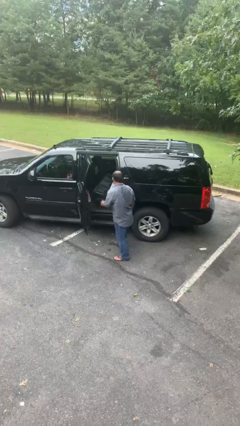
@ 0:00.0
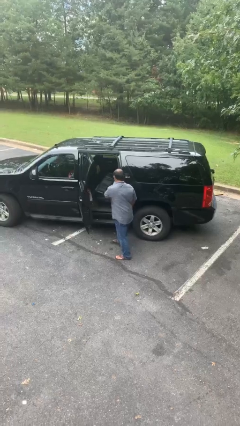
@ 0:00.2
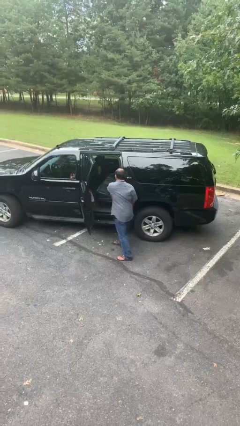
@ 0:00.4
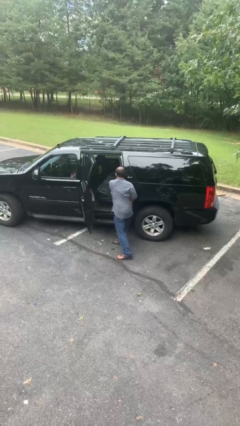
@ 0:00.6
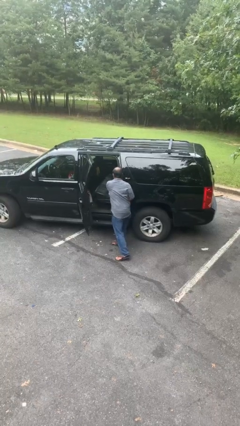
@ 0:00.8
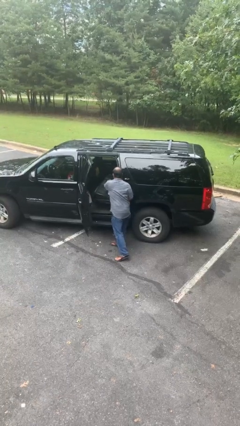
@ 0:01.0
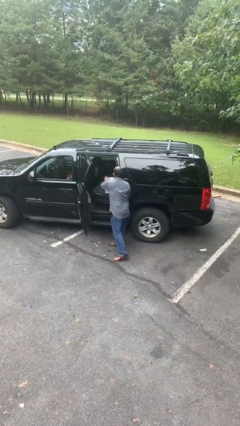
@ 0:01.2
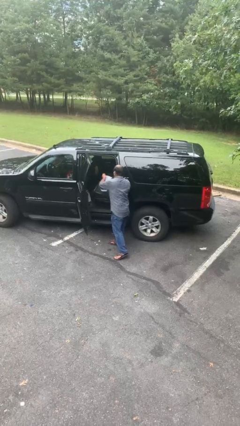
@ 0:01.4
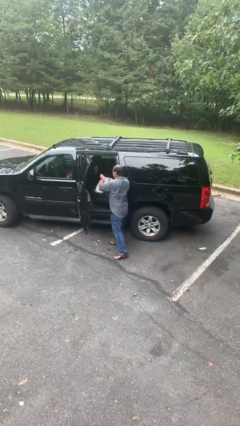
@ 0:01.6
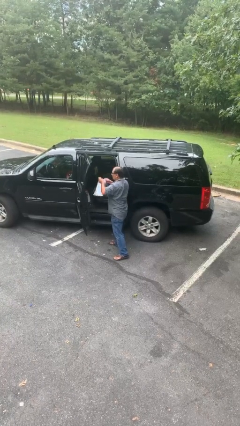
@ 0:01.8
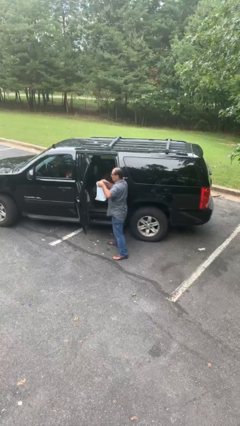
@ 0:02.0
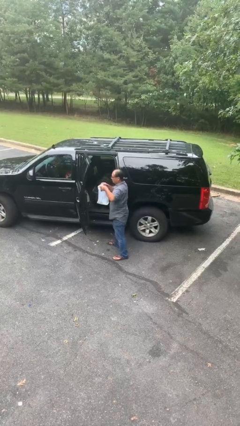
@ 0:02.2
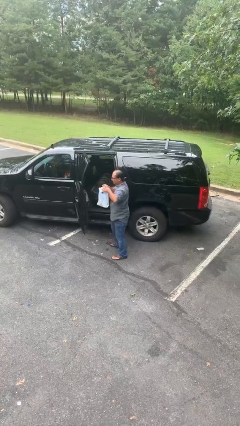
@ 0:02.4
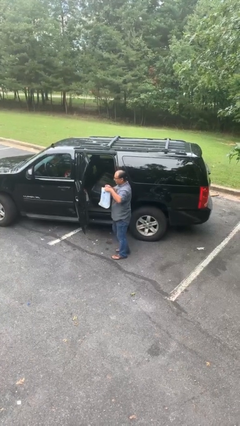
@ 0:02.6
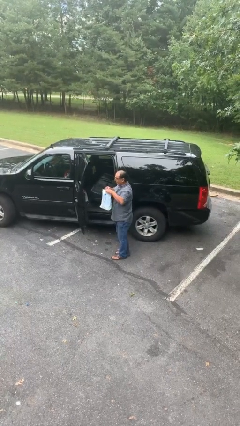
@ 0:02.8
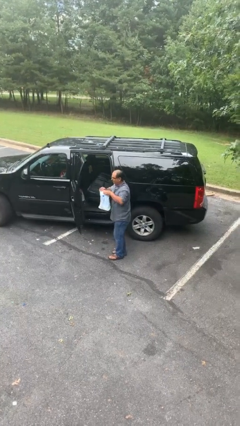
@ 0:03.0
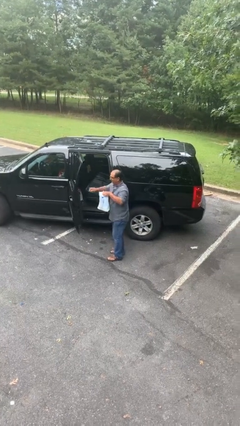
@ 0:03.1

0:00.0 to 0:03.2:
person unloads car

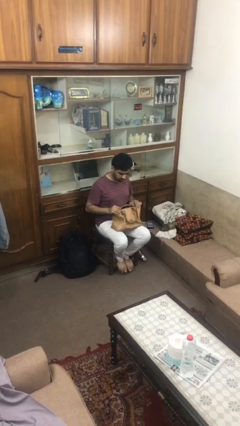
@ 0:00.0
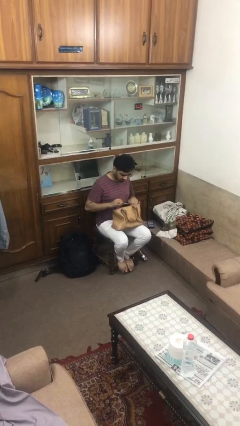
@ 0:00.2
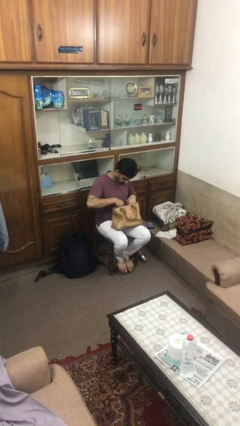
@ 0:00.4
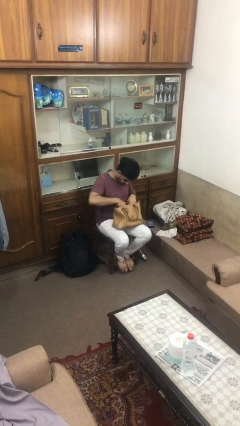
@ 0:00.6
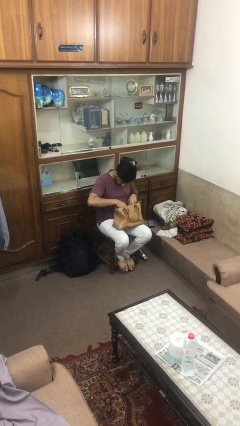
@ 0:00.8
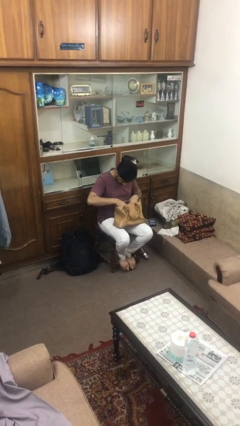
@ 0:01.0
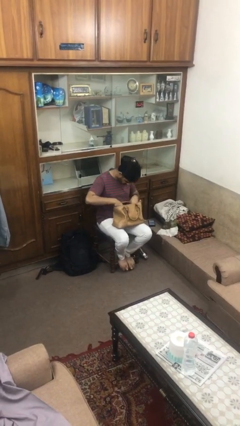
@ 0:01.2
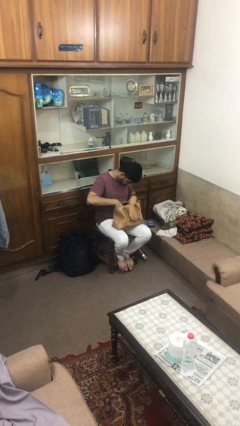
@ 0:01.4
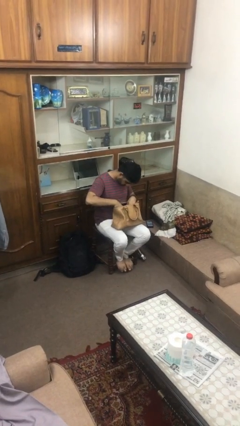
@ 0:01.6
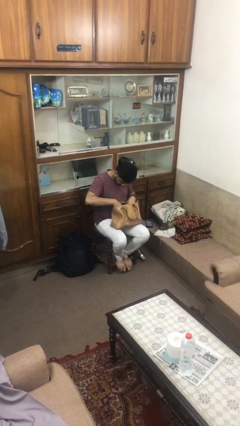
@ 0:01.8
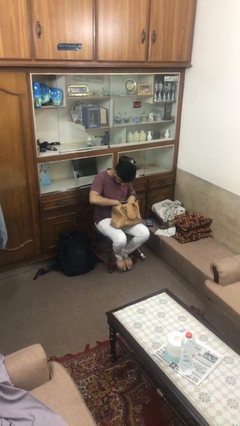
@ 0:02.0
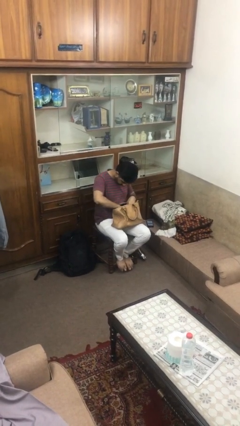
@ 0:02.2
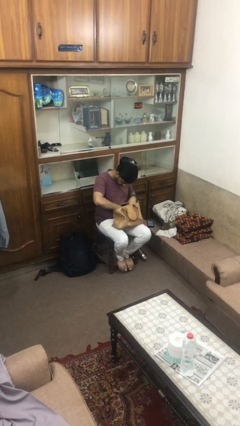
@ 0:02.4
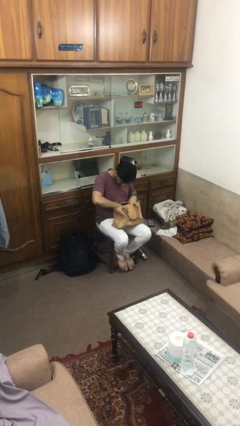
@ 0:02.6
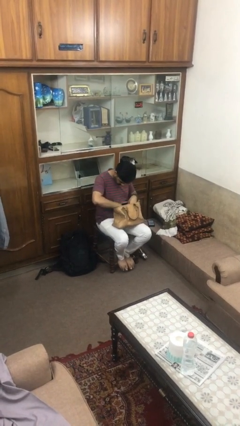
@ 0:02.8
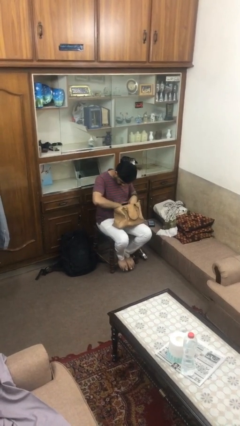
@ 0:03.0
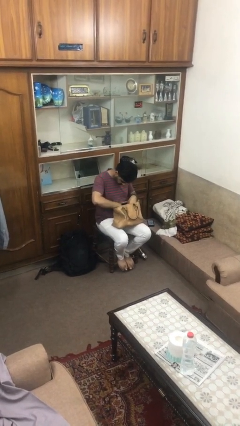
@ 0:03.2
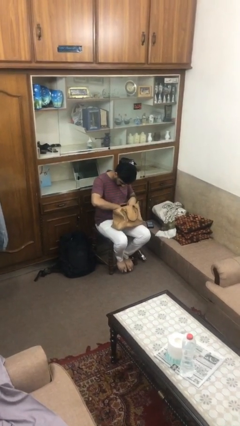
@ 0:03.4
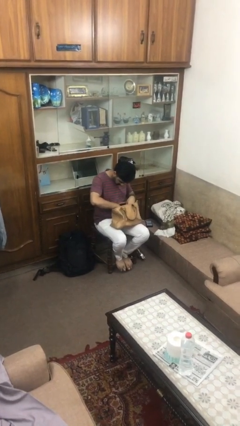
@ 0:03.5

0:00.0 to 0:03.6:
person searches in purse

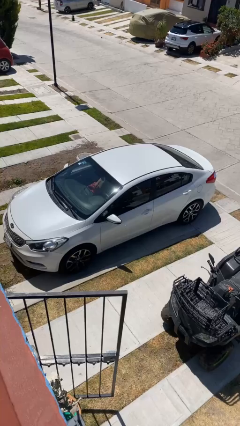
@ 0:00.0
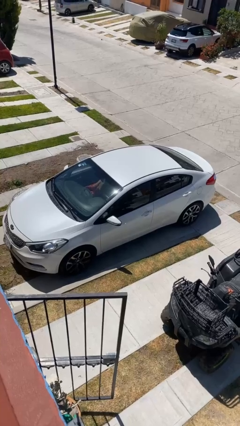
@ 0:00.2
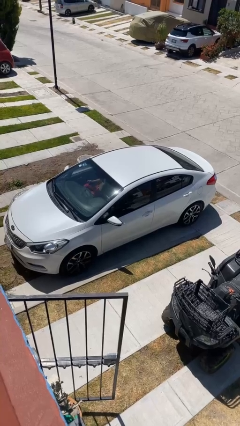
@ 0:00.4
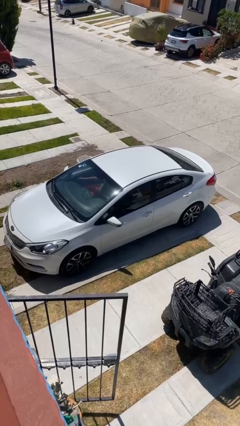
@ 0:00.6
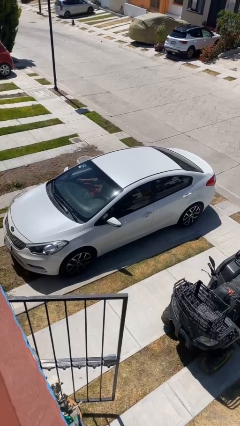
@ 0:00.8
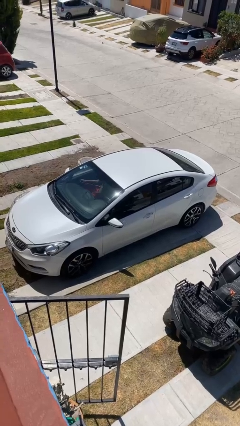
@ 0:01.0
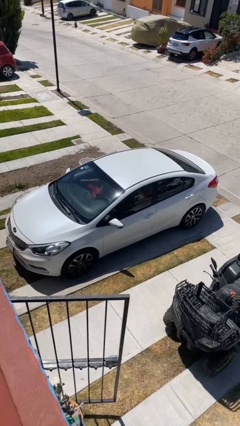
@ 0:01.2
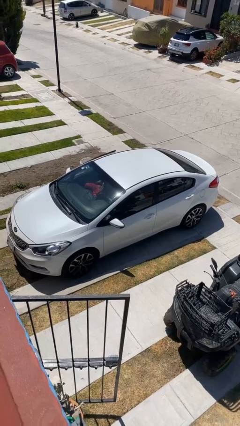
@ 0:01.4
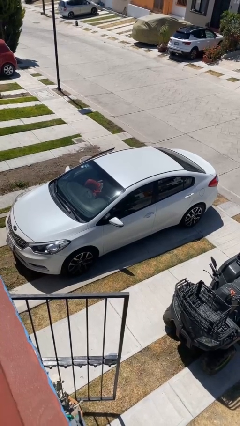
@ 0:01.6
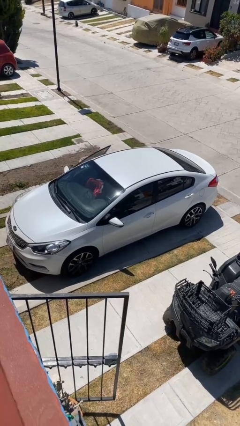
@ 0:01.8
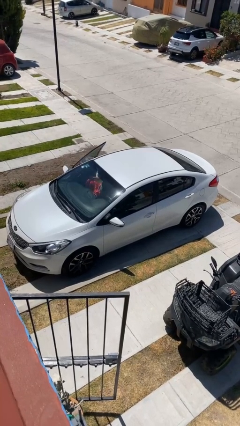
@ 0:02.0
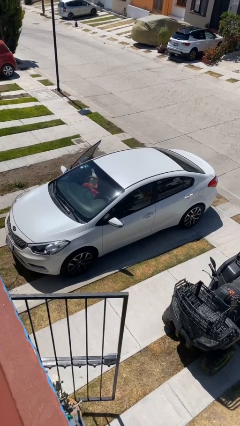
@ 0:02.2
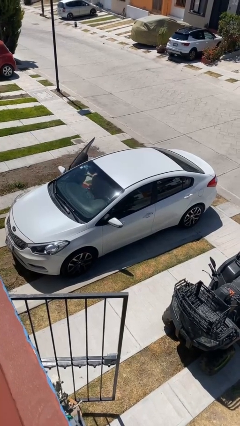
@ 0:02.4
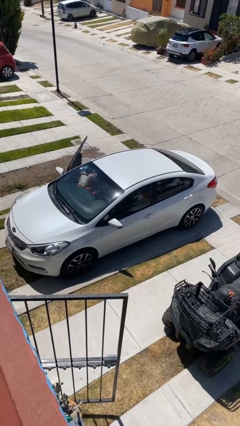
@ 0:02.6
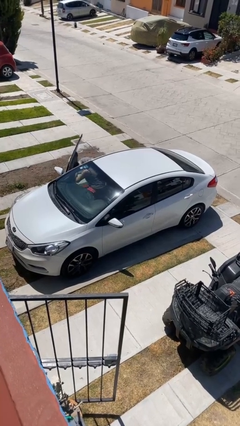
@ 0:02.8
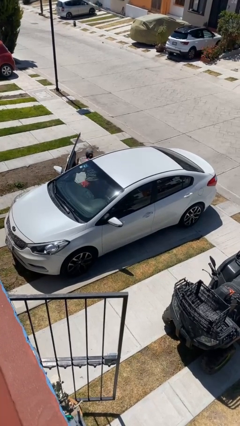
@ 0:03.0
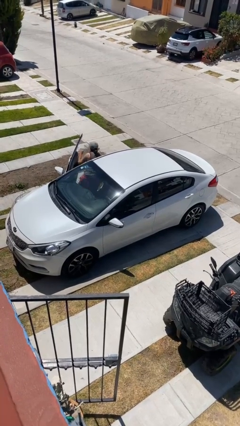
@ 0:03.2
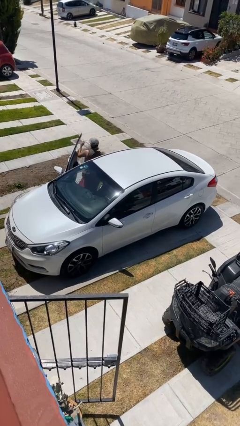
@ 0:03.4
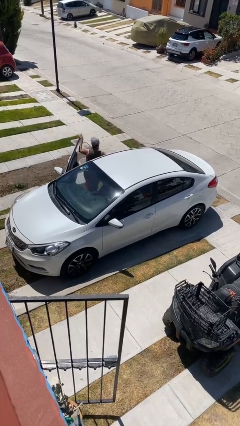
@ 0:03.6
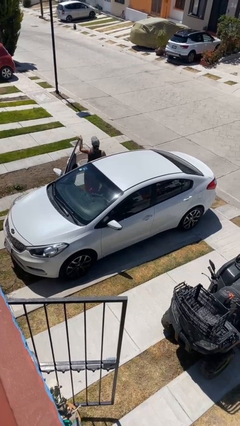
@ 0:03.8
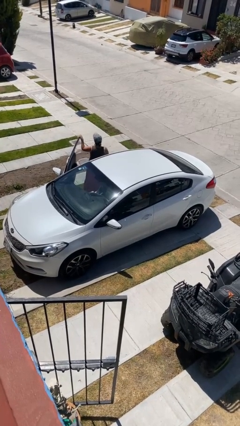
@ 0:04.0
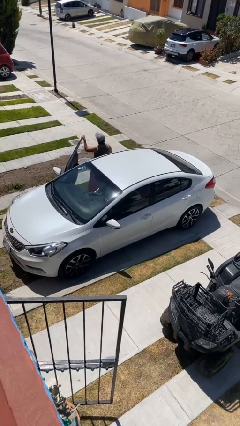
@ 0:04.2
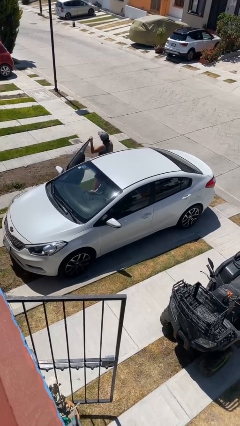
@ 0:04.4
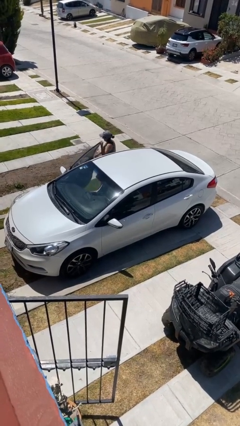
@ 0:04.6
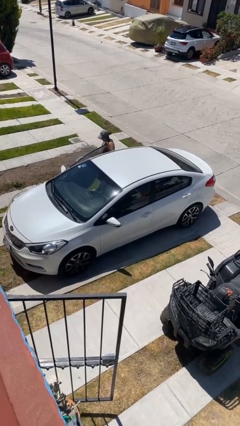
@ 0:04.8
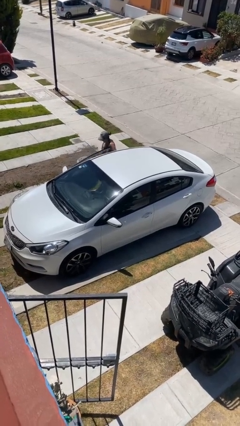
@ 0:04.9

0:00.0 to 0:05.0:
car drops off person

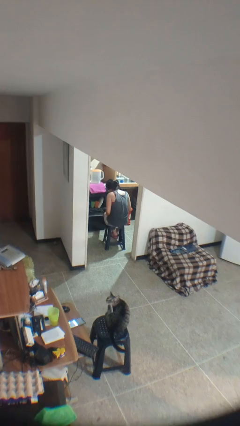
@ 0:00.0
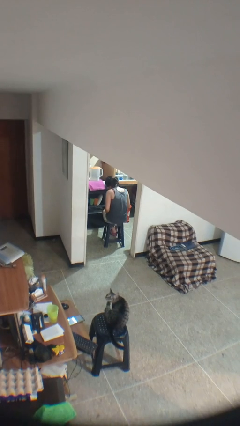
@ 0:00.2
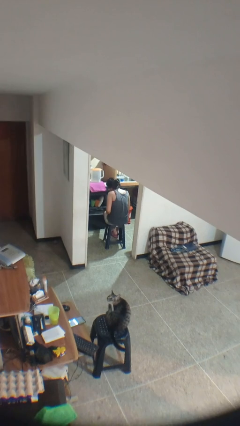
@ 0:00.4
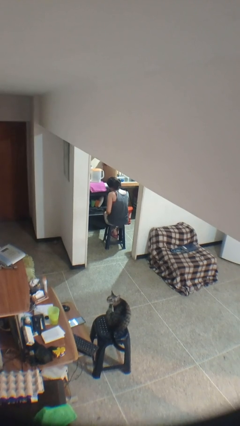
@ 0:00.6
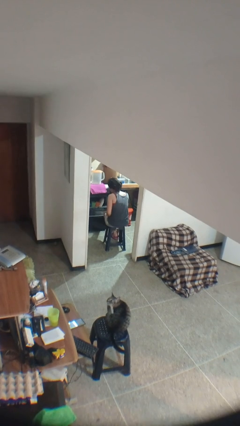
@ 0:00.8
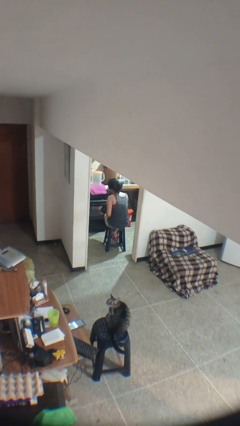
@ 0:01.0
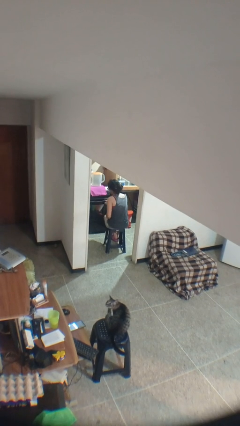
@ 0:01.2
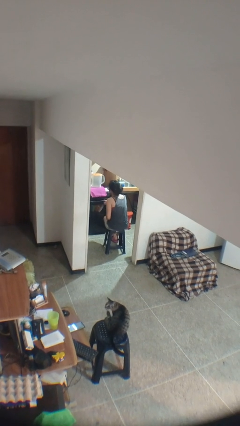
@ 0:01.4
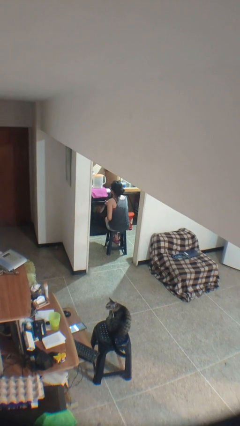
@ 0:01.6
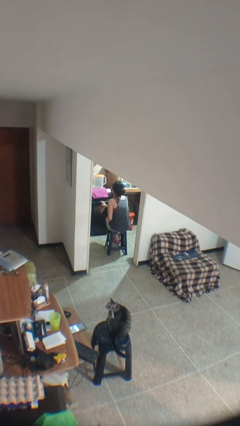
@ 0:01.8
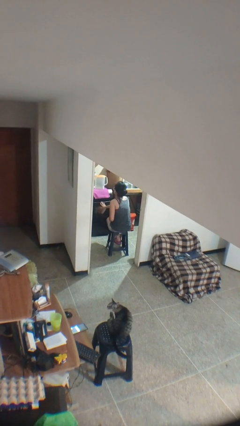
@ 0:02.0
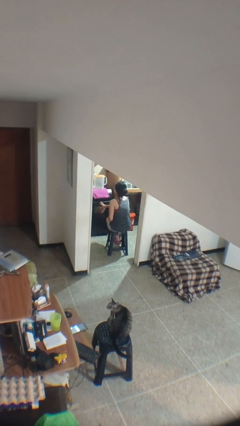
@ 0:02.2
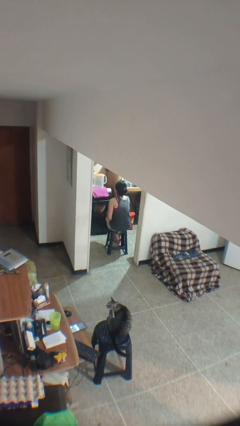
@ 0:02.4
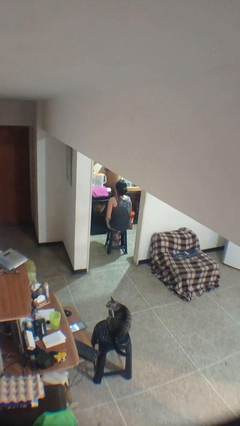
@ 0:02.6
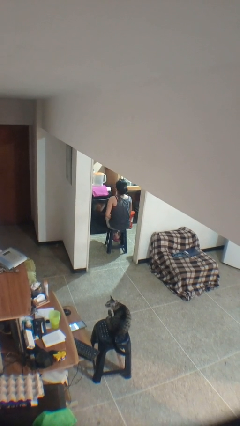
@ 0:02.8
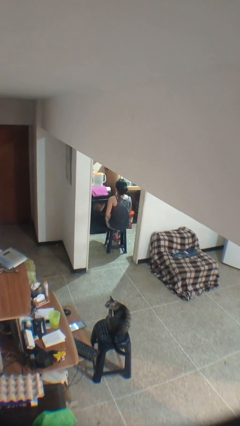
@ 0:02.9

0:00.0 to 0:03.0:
person closes dishwasher

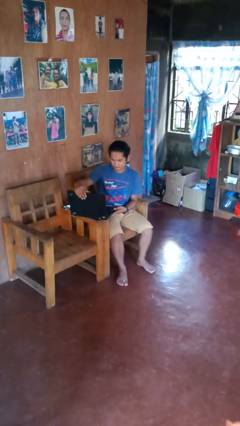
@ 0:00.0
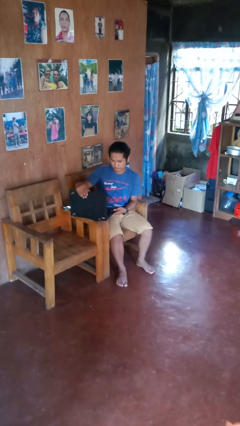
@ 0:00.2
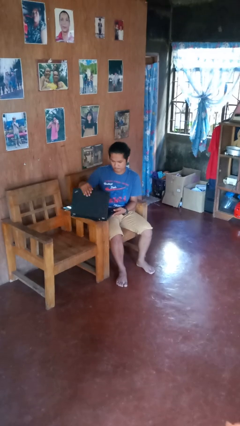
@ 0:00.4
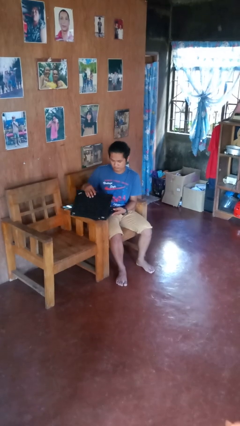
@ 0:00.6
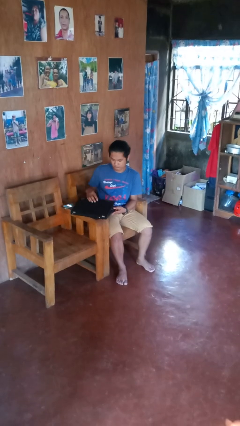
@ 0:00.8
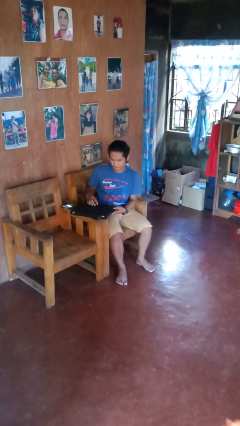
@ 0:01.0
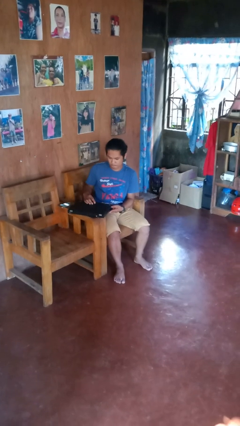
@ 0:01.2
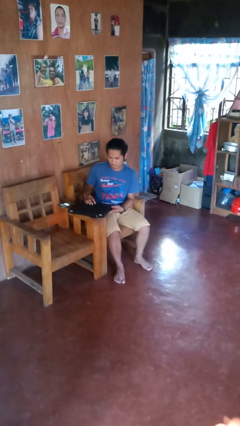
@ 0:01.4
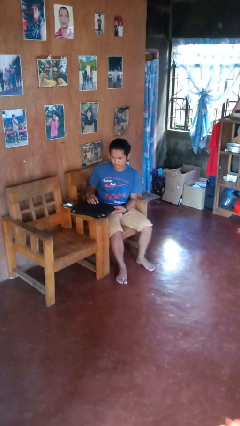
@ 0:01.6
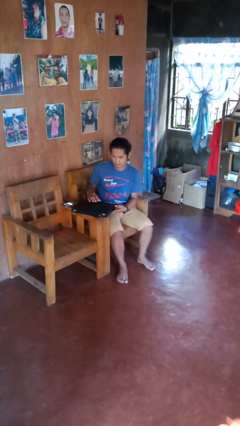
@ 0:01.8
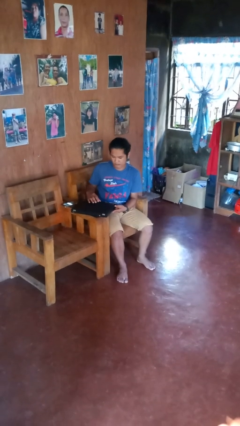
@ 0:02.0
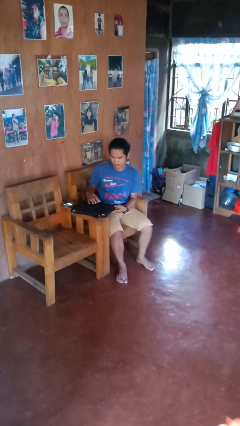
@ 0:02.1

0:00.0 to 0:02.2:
person closes laptop

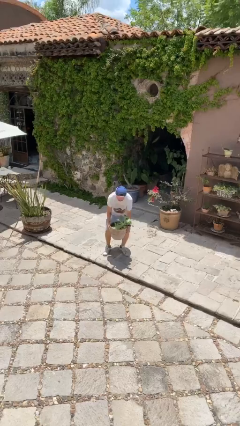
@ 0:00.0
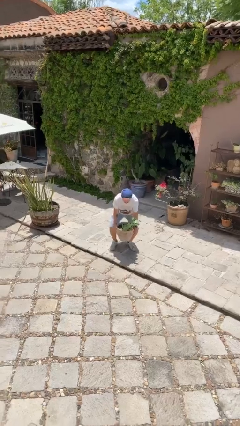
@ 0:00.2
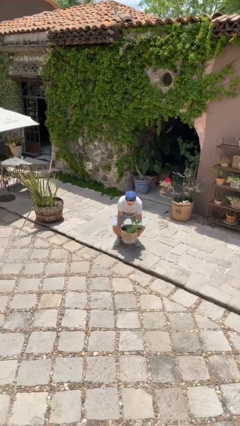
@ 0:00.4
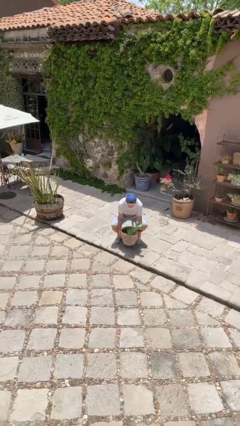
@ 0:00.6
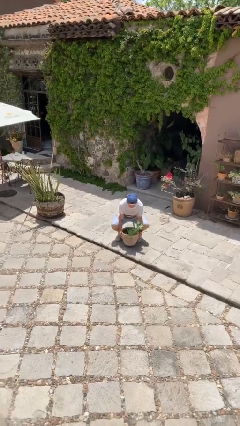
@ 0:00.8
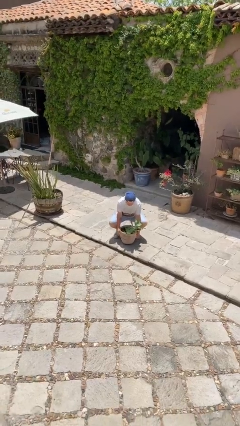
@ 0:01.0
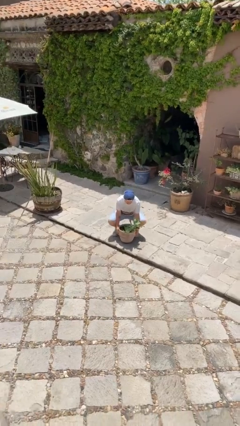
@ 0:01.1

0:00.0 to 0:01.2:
person puts down object on floor
